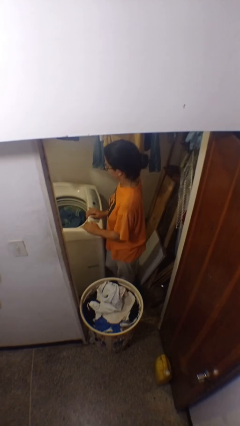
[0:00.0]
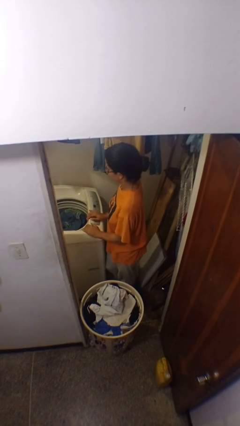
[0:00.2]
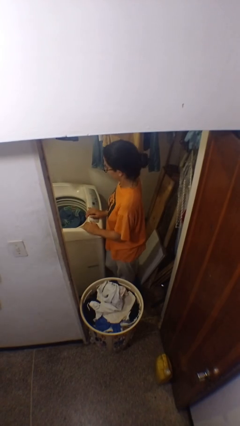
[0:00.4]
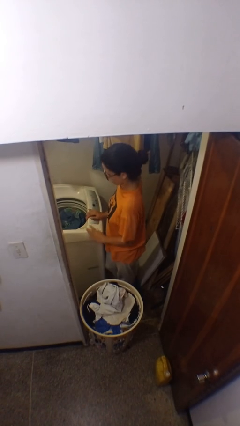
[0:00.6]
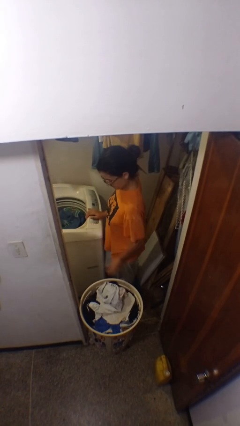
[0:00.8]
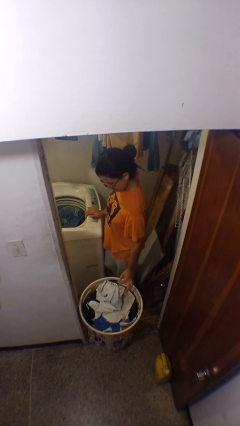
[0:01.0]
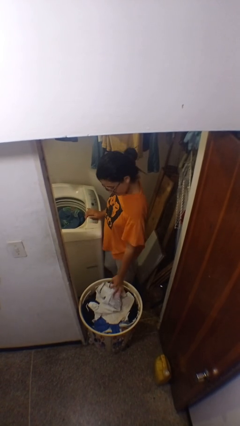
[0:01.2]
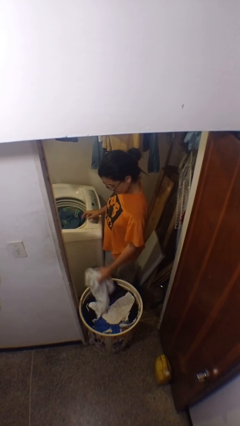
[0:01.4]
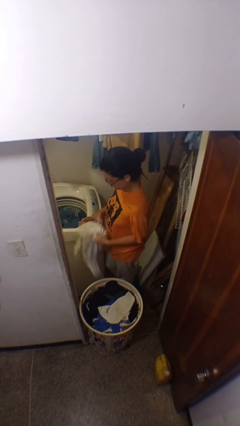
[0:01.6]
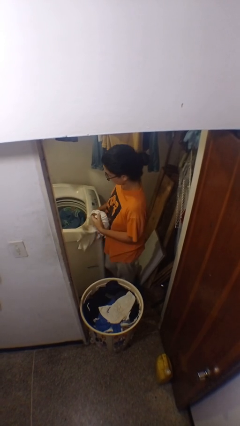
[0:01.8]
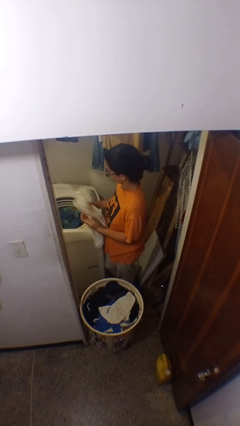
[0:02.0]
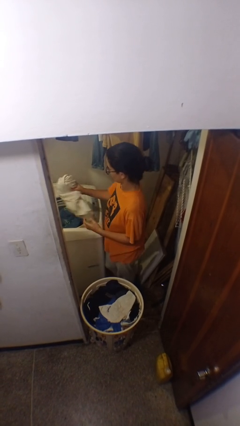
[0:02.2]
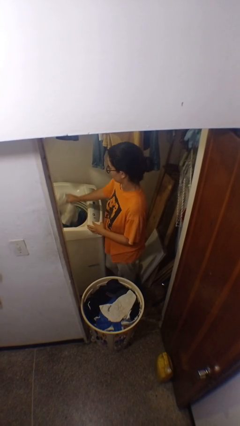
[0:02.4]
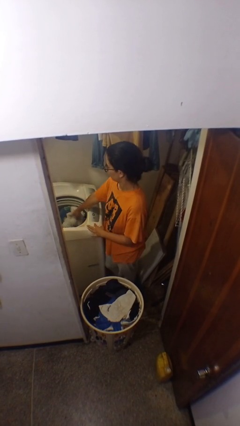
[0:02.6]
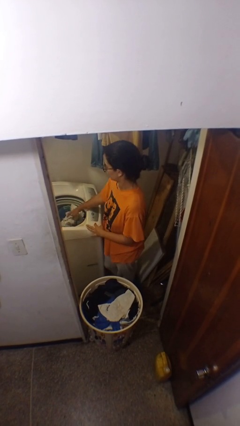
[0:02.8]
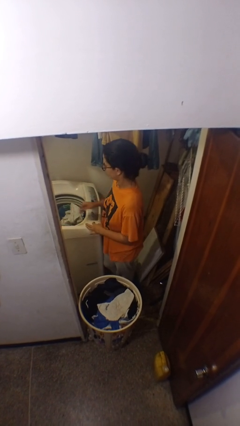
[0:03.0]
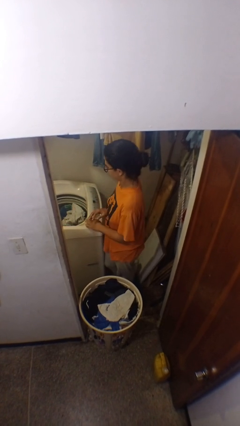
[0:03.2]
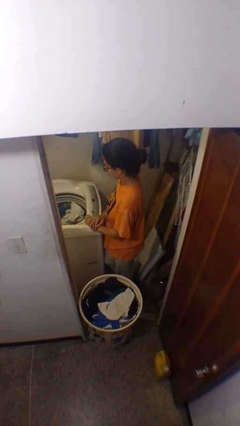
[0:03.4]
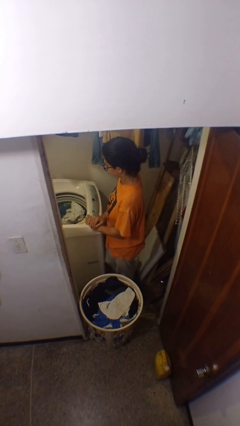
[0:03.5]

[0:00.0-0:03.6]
person loads clotheswasher

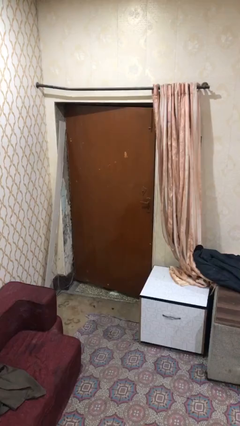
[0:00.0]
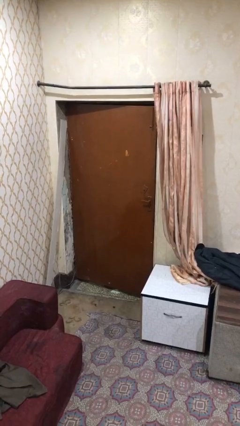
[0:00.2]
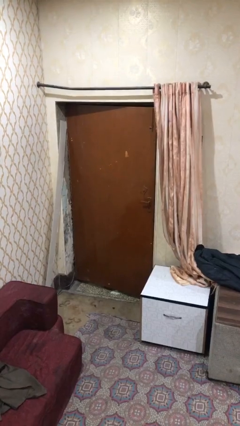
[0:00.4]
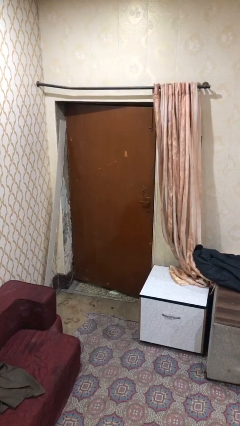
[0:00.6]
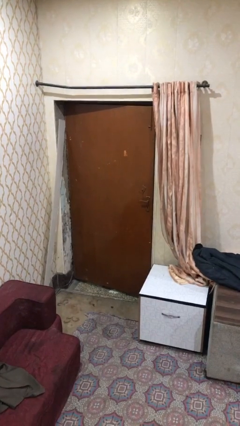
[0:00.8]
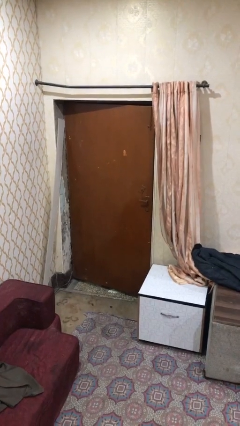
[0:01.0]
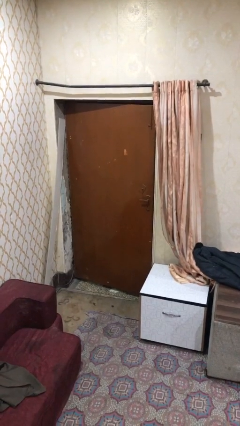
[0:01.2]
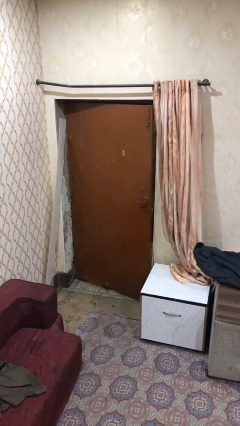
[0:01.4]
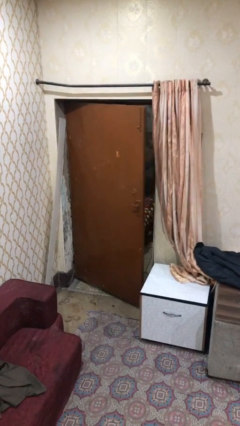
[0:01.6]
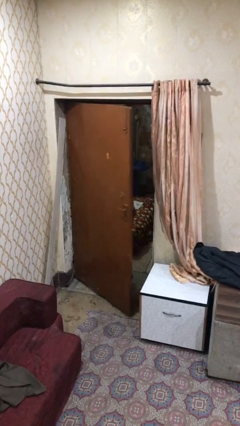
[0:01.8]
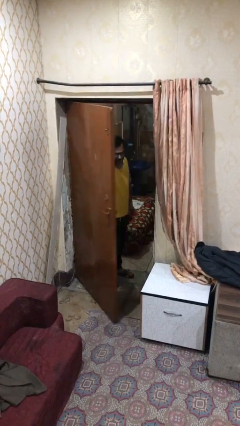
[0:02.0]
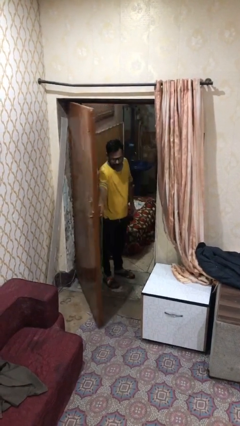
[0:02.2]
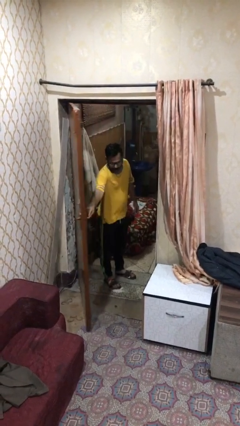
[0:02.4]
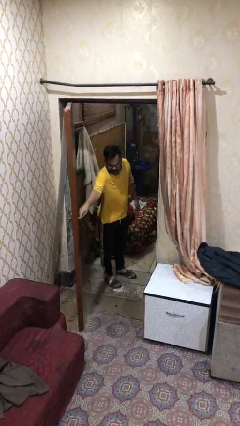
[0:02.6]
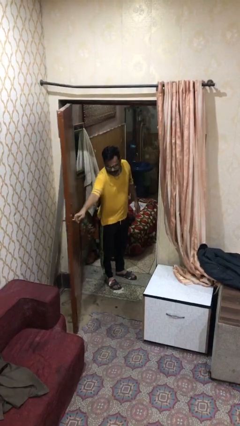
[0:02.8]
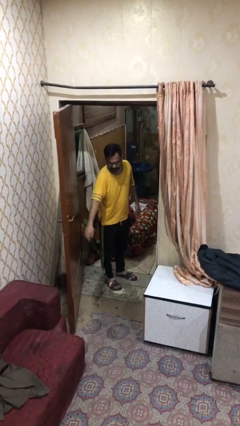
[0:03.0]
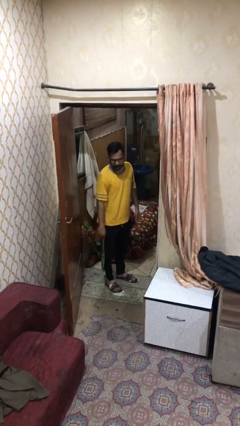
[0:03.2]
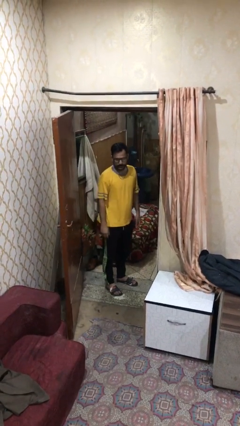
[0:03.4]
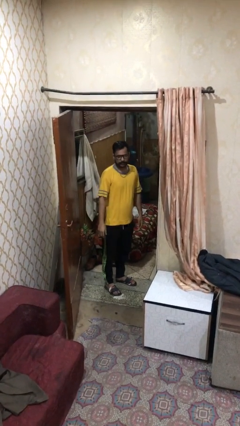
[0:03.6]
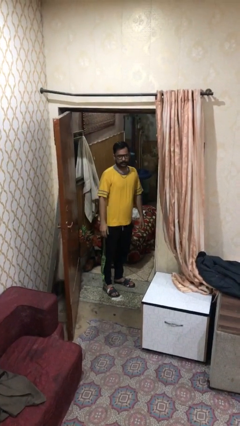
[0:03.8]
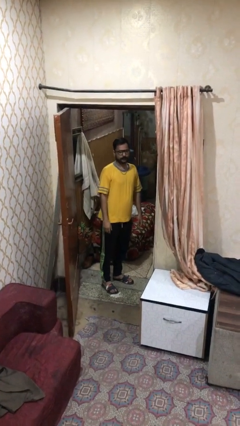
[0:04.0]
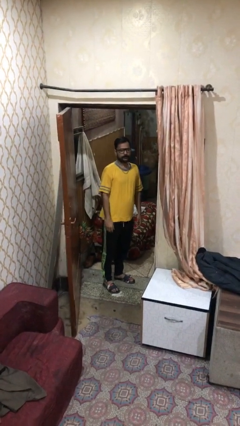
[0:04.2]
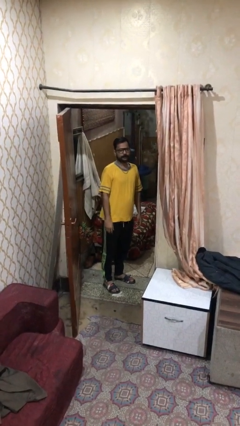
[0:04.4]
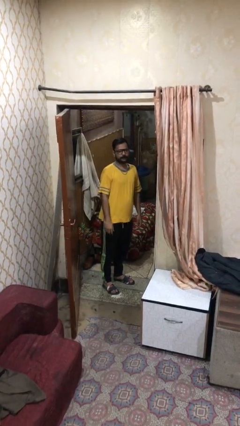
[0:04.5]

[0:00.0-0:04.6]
person opens facility door

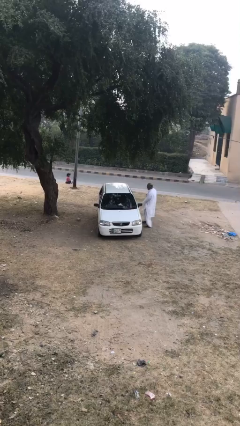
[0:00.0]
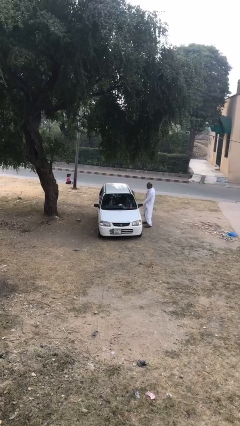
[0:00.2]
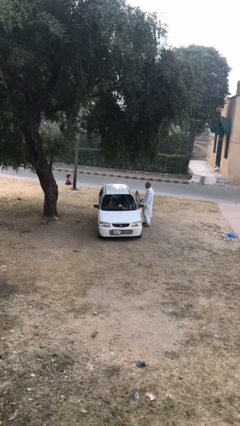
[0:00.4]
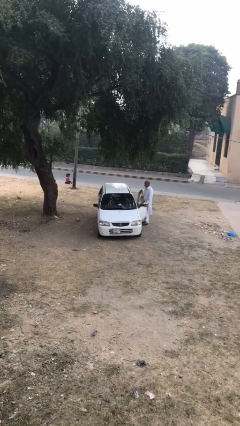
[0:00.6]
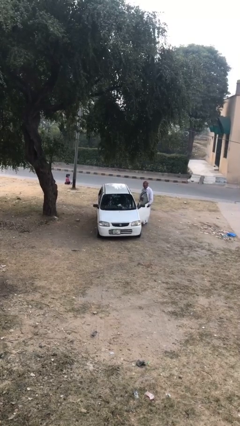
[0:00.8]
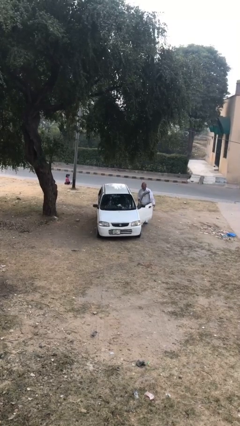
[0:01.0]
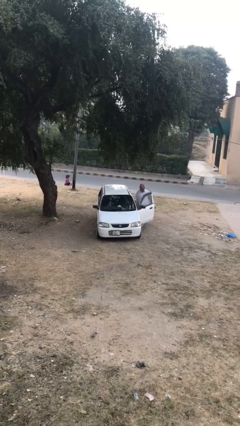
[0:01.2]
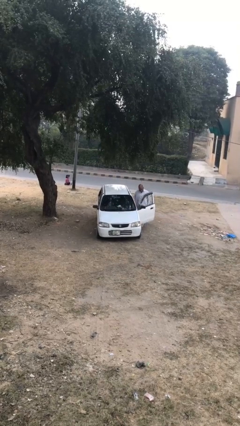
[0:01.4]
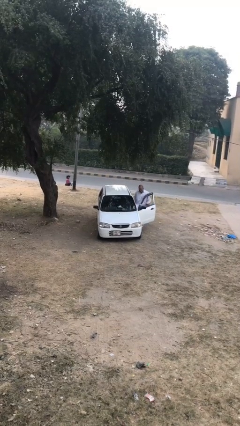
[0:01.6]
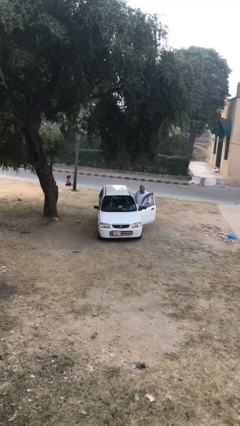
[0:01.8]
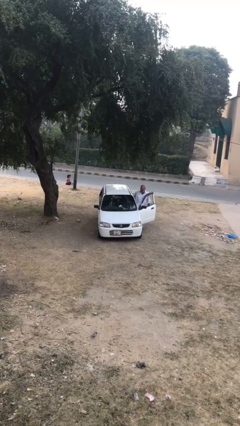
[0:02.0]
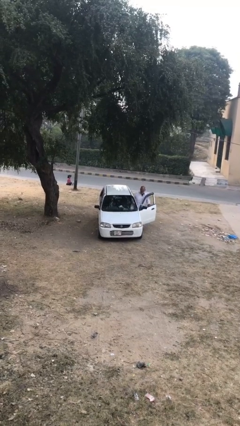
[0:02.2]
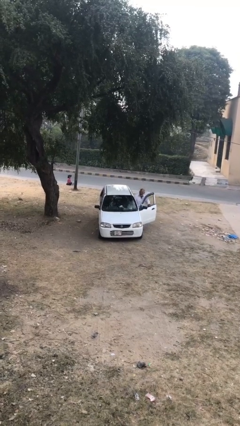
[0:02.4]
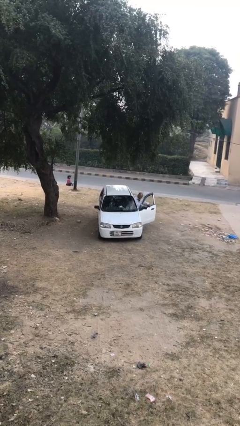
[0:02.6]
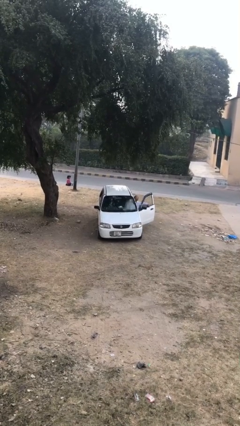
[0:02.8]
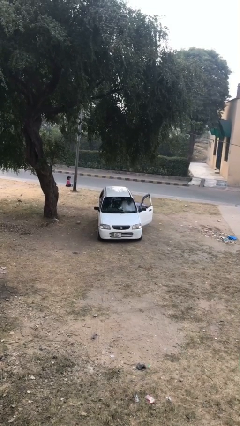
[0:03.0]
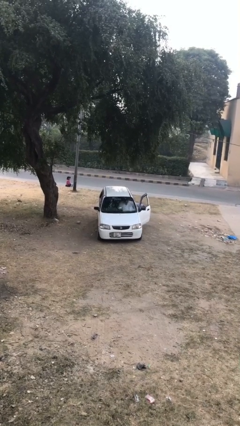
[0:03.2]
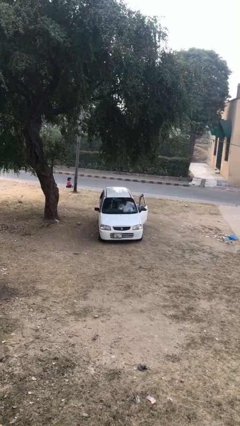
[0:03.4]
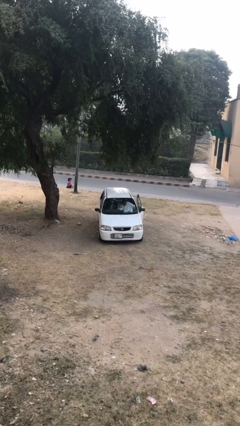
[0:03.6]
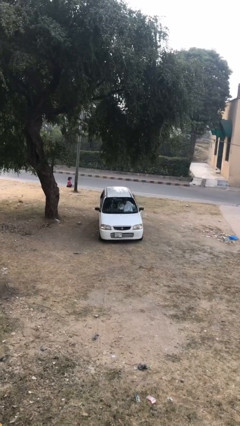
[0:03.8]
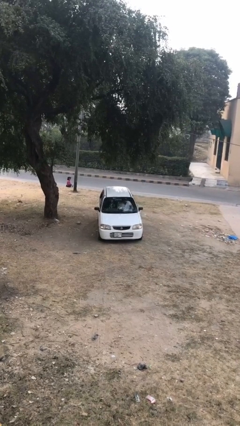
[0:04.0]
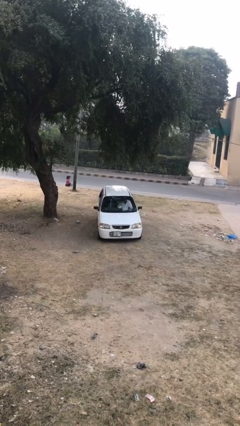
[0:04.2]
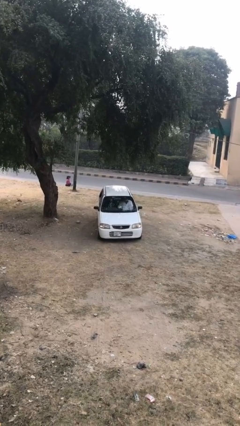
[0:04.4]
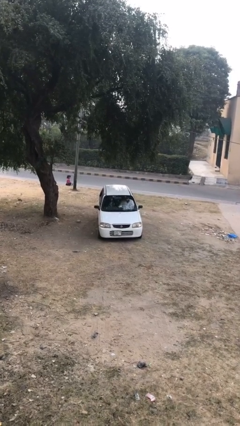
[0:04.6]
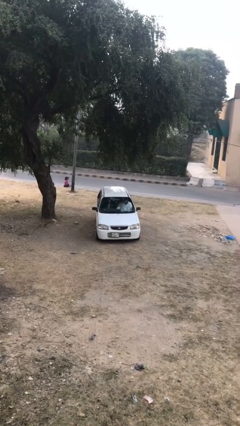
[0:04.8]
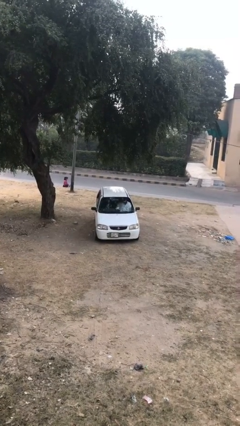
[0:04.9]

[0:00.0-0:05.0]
car picks up person

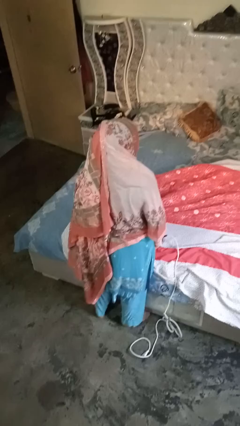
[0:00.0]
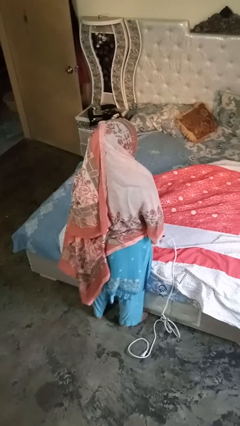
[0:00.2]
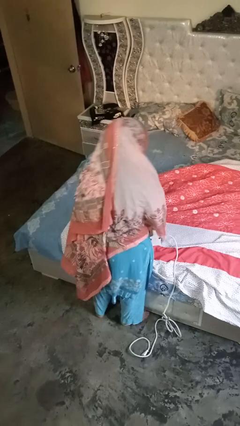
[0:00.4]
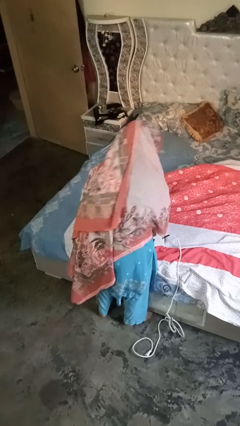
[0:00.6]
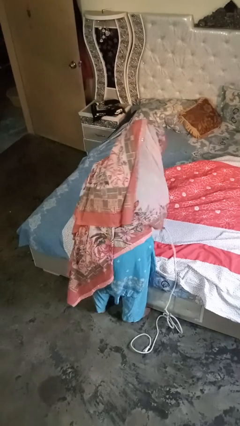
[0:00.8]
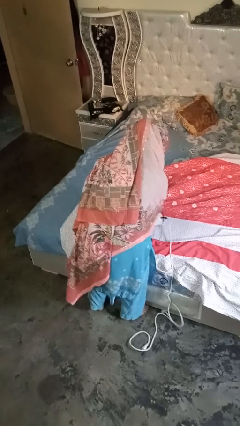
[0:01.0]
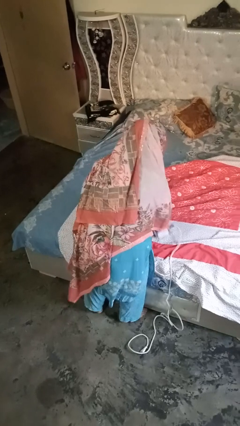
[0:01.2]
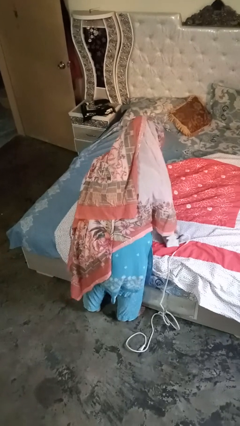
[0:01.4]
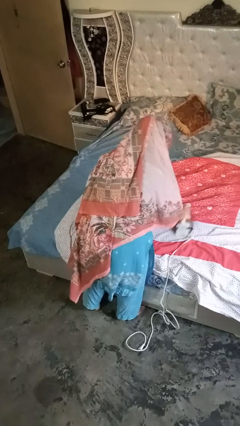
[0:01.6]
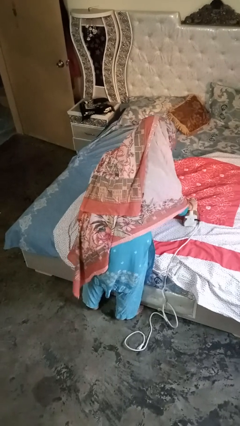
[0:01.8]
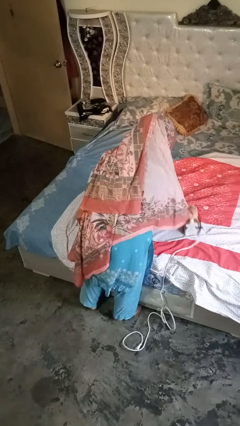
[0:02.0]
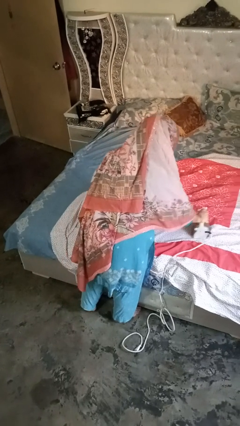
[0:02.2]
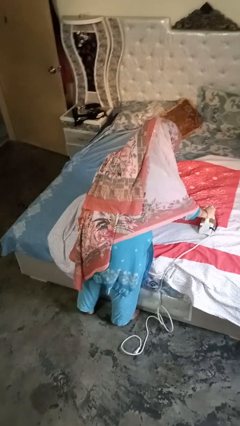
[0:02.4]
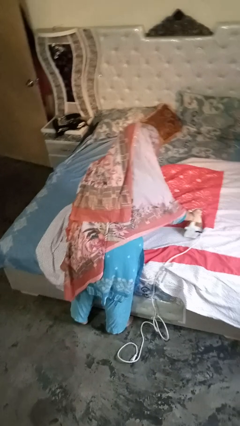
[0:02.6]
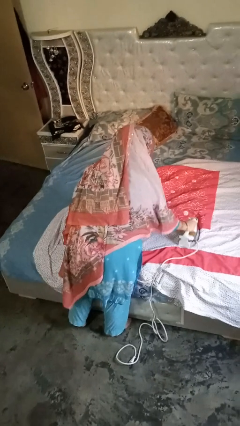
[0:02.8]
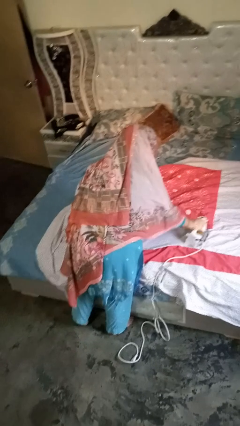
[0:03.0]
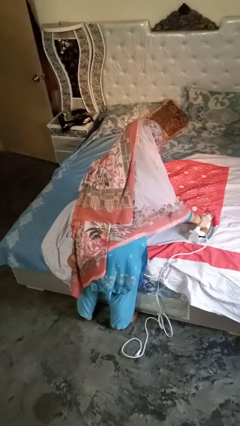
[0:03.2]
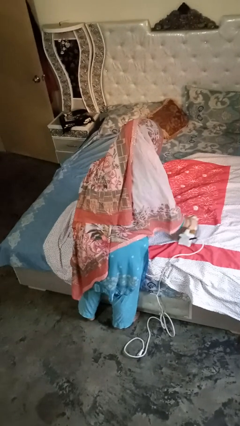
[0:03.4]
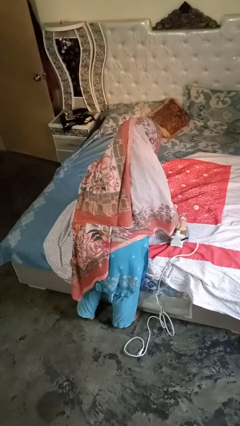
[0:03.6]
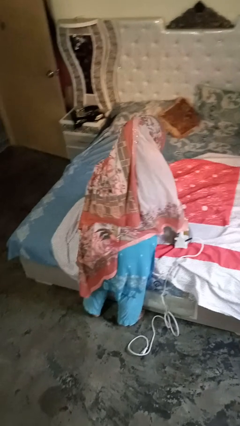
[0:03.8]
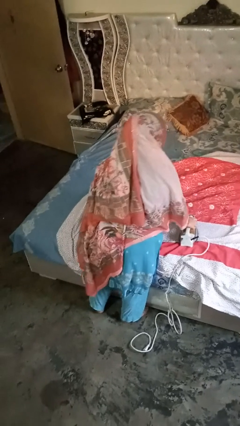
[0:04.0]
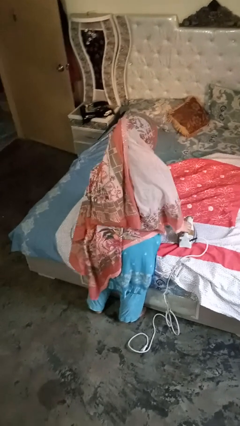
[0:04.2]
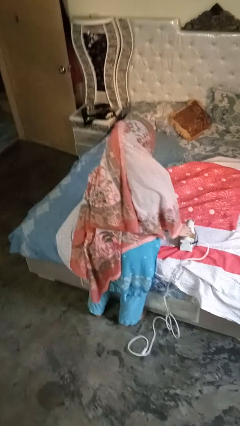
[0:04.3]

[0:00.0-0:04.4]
person irons clothes

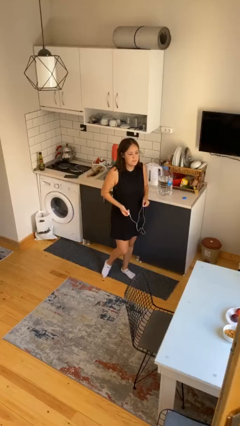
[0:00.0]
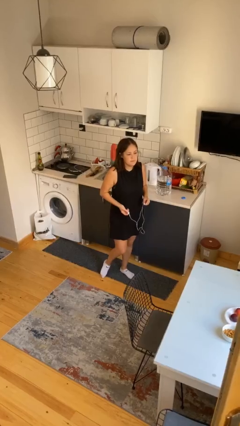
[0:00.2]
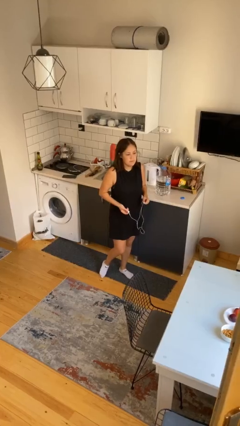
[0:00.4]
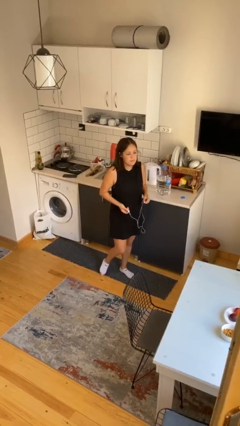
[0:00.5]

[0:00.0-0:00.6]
person takes off headphones
